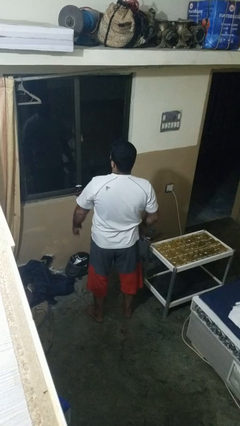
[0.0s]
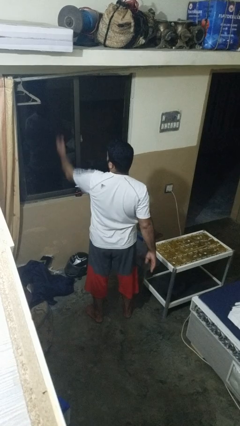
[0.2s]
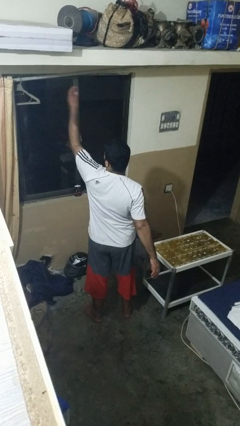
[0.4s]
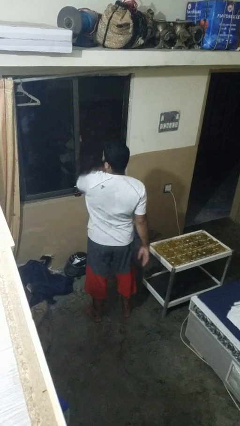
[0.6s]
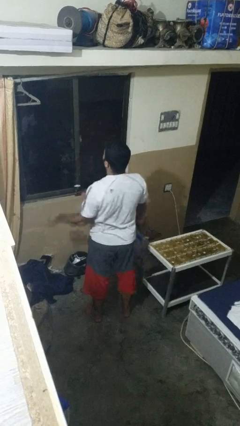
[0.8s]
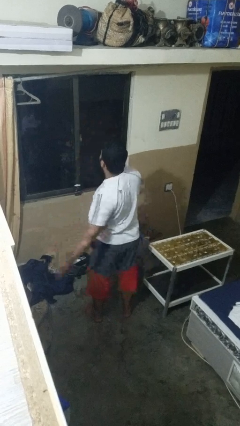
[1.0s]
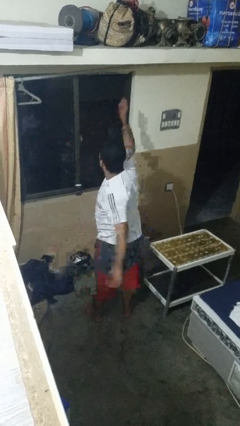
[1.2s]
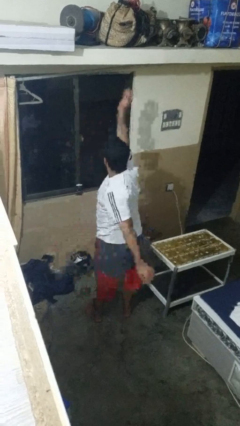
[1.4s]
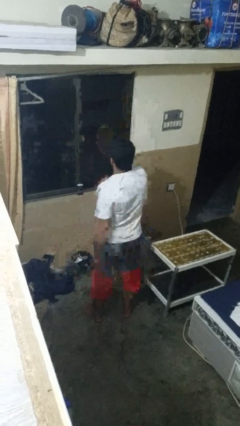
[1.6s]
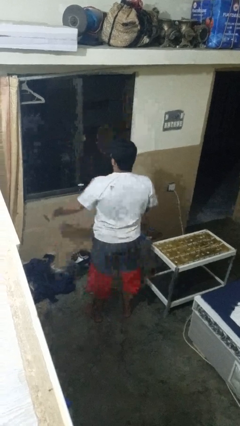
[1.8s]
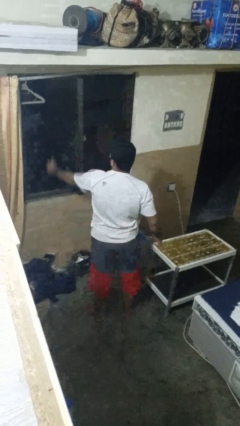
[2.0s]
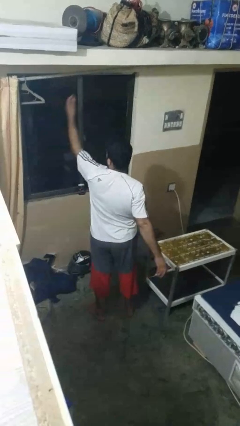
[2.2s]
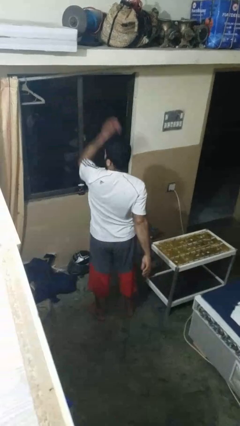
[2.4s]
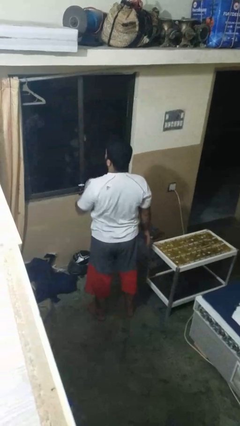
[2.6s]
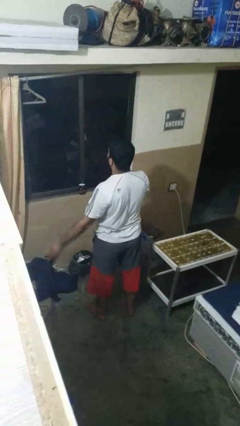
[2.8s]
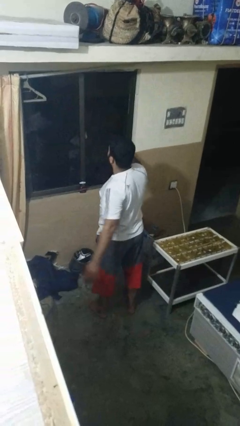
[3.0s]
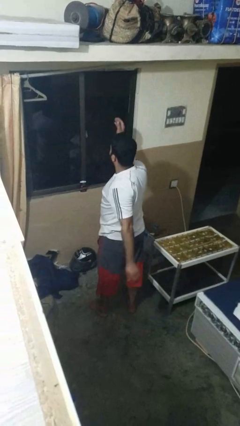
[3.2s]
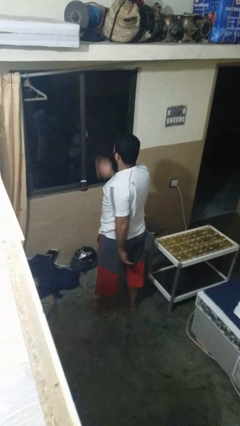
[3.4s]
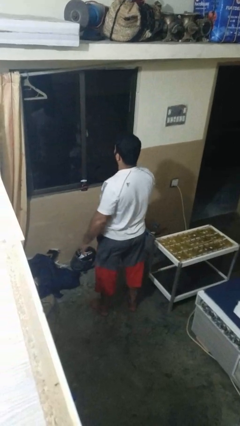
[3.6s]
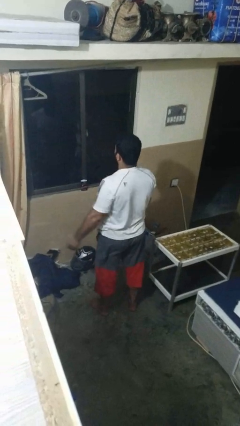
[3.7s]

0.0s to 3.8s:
person drums on chest

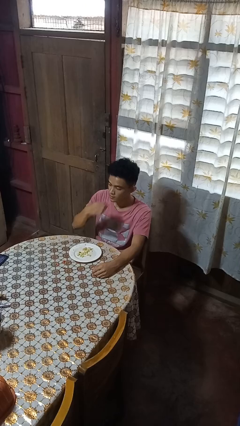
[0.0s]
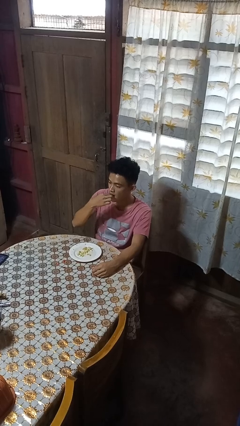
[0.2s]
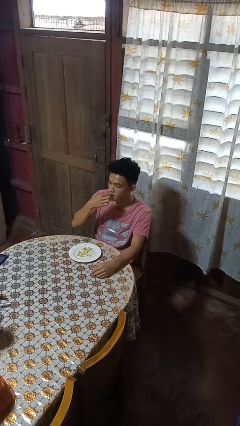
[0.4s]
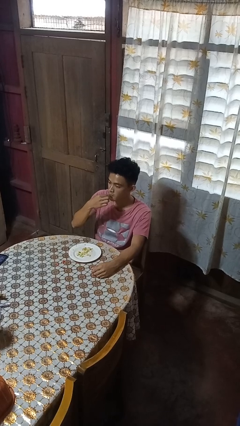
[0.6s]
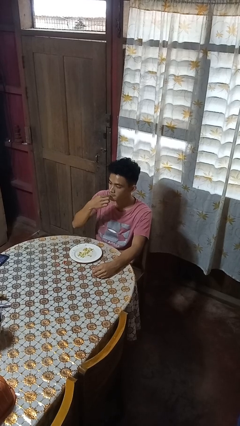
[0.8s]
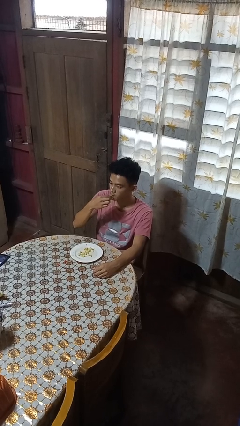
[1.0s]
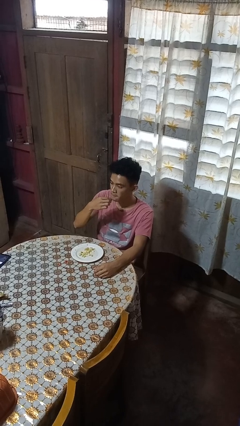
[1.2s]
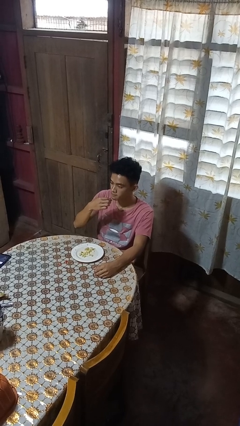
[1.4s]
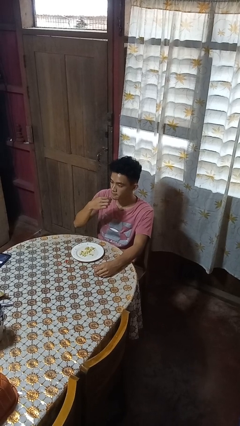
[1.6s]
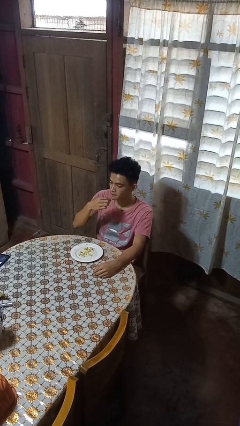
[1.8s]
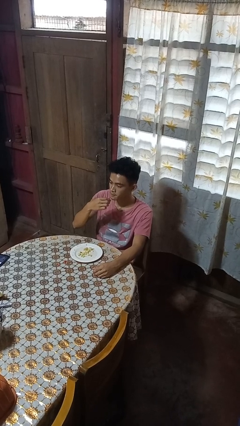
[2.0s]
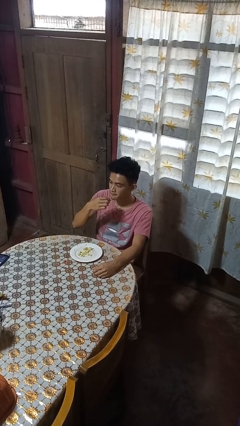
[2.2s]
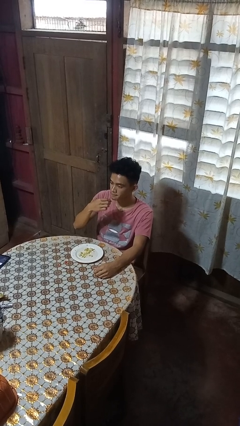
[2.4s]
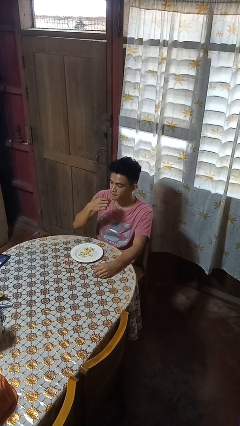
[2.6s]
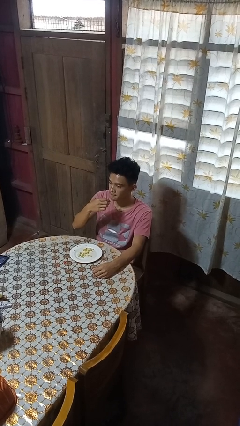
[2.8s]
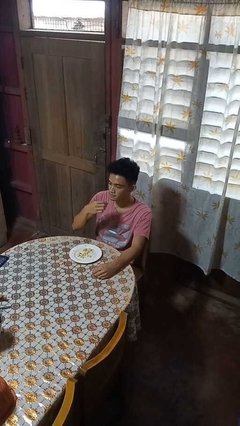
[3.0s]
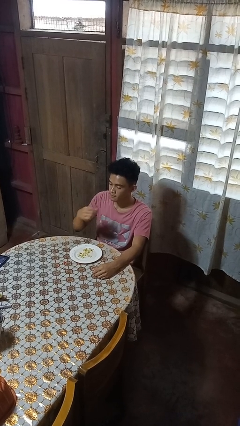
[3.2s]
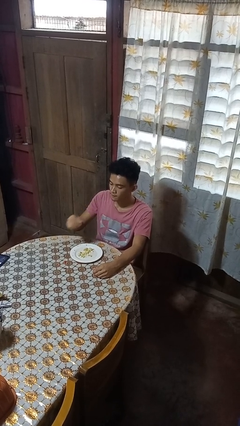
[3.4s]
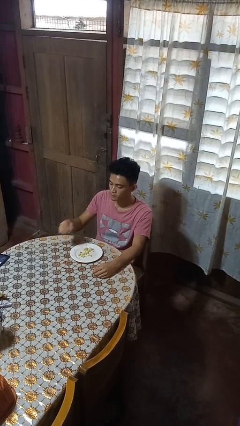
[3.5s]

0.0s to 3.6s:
person eats with hands

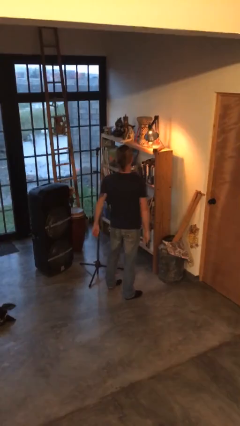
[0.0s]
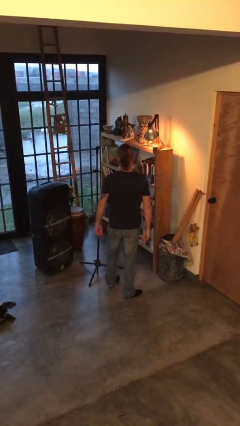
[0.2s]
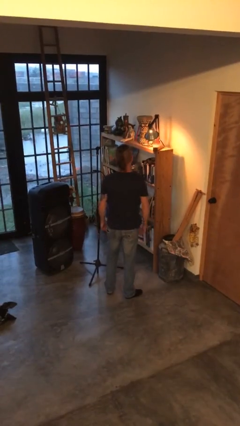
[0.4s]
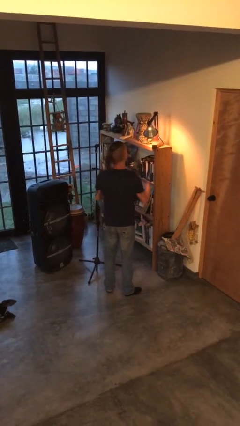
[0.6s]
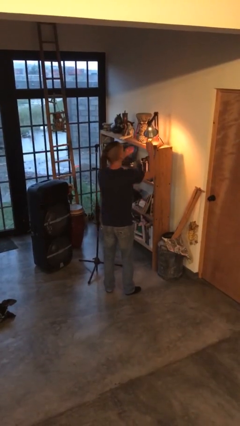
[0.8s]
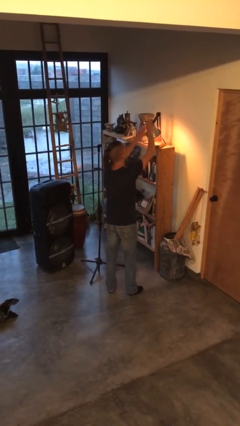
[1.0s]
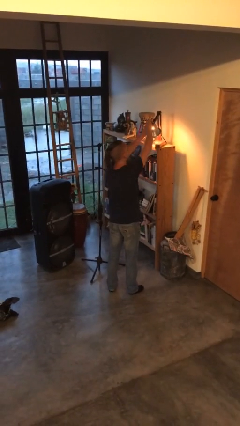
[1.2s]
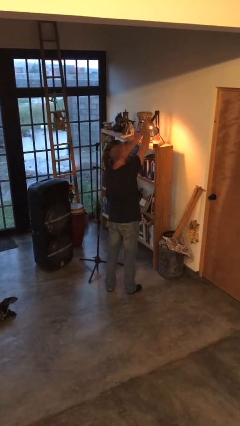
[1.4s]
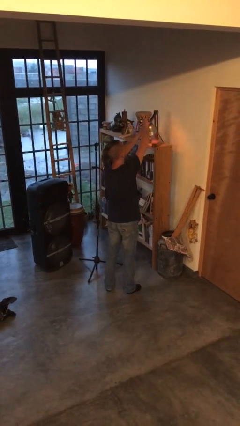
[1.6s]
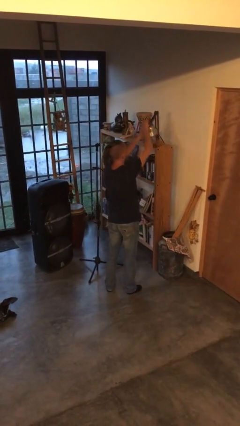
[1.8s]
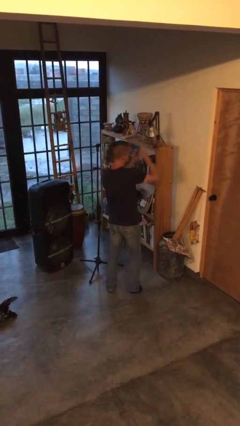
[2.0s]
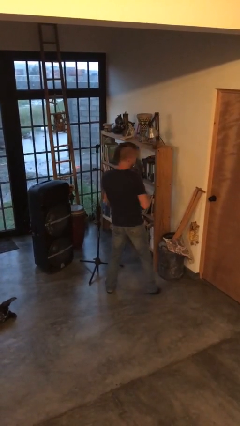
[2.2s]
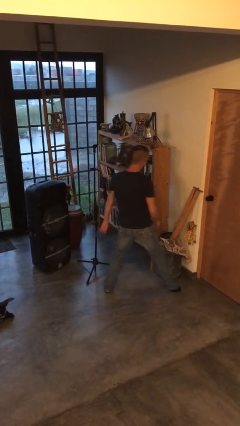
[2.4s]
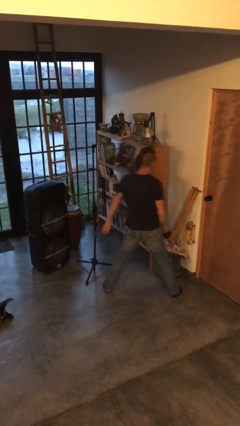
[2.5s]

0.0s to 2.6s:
person turns off lamp

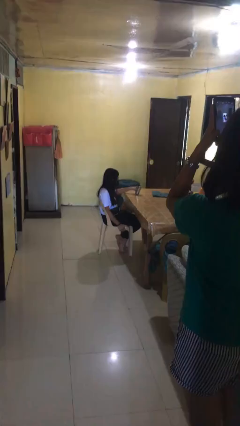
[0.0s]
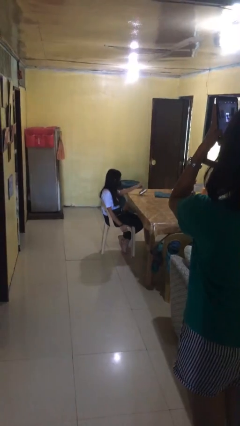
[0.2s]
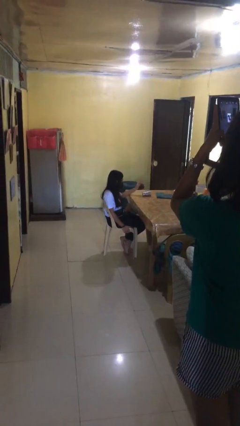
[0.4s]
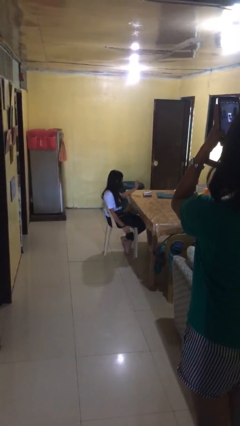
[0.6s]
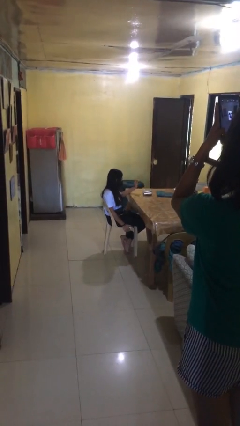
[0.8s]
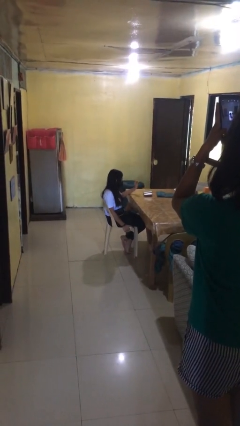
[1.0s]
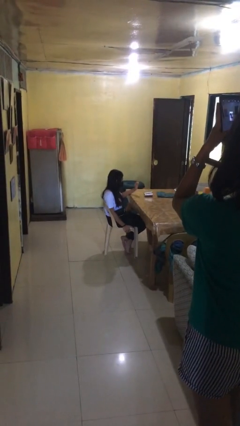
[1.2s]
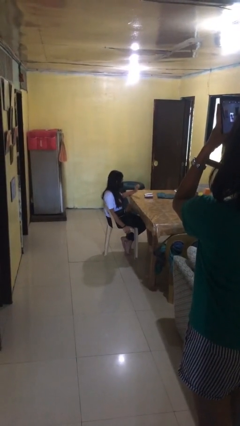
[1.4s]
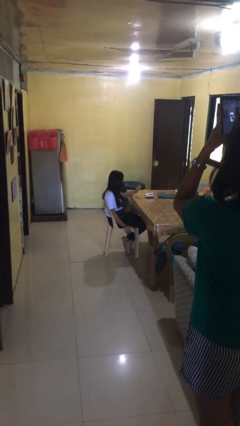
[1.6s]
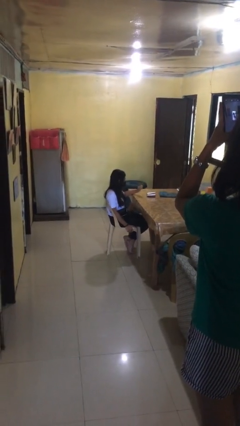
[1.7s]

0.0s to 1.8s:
person spills on table

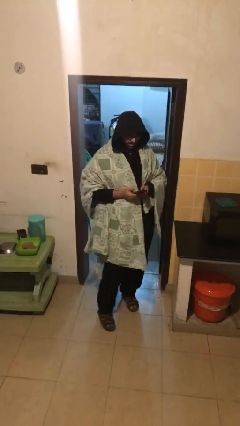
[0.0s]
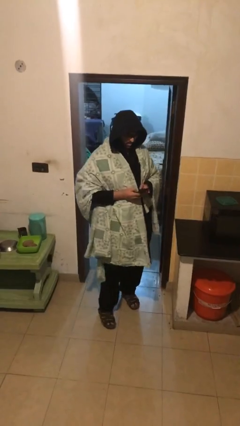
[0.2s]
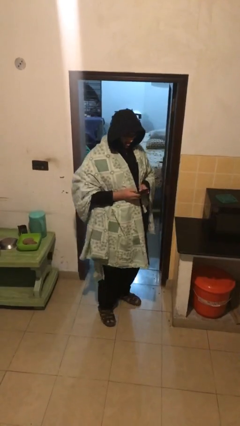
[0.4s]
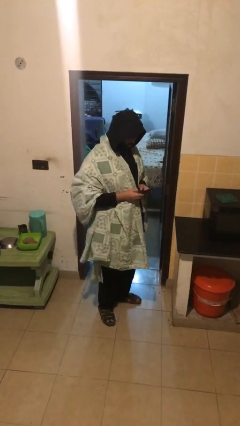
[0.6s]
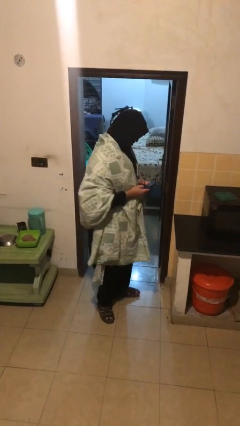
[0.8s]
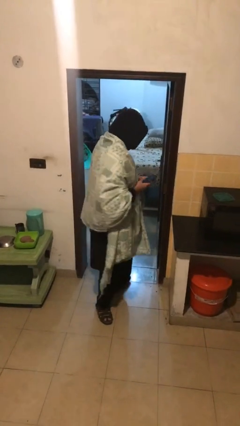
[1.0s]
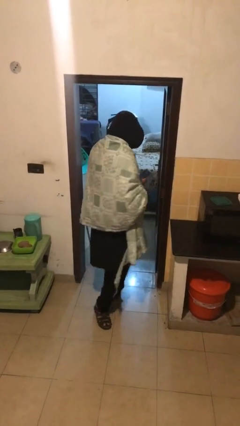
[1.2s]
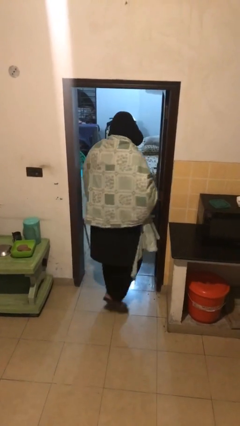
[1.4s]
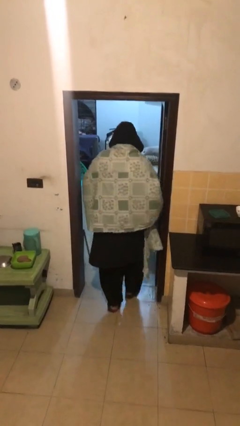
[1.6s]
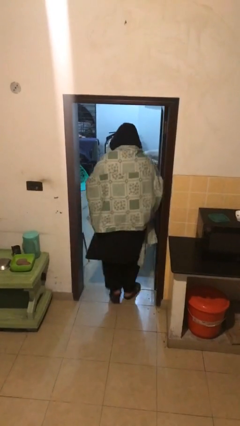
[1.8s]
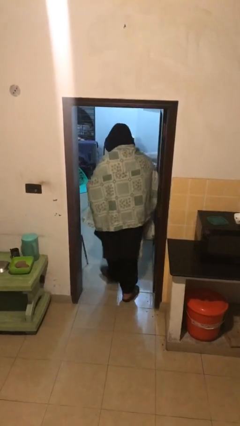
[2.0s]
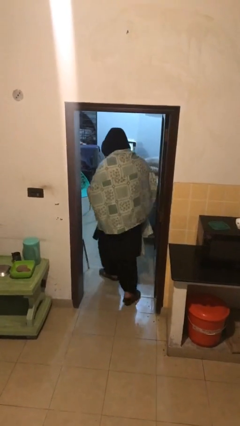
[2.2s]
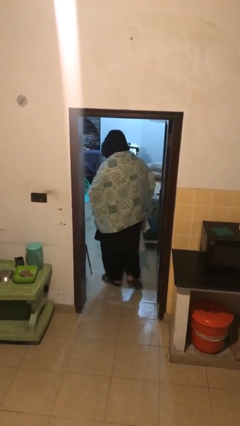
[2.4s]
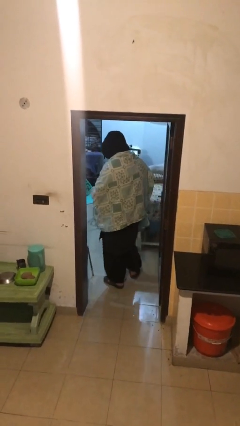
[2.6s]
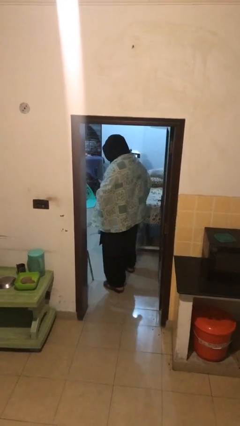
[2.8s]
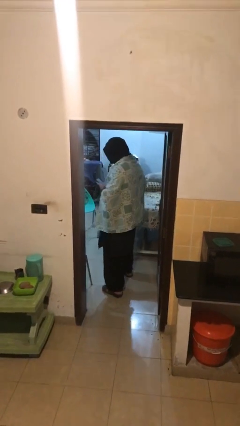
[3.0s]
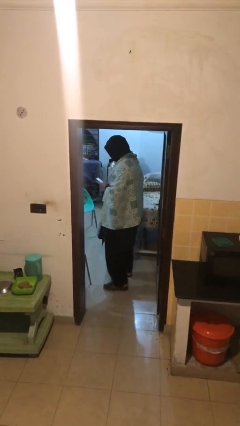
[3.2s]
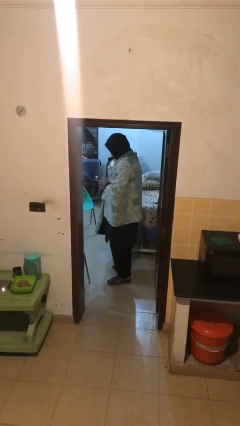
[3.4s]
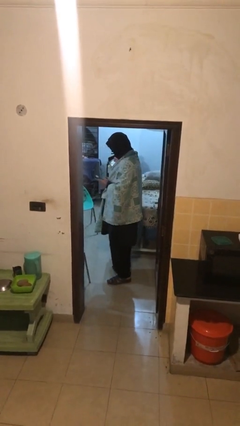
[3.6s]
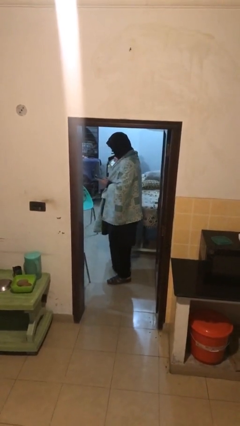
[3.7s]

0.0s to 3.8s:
person exits scene through structure

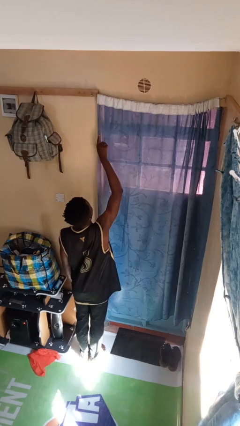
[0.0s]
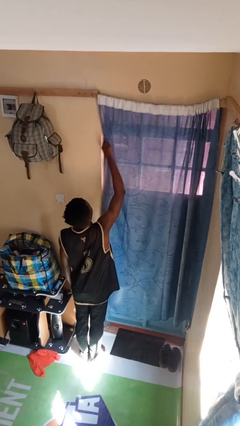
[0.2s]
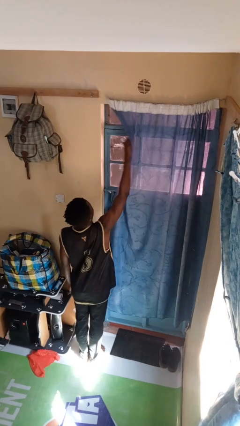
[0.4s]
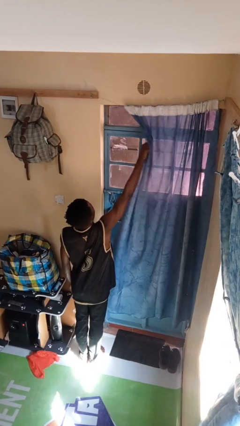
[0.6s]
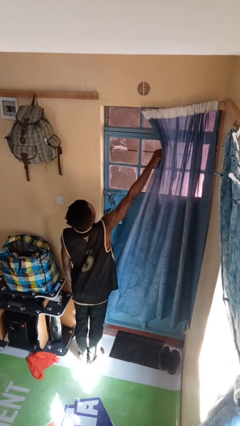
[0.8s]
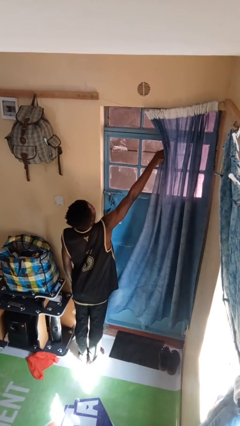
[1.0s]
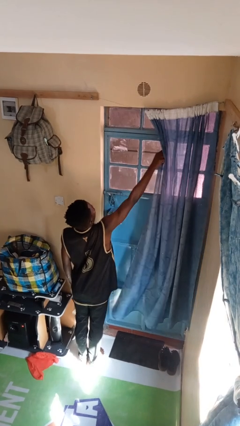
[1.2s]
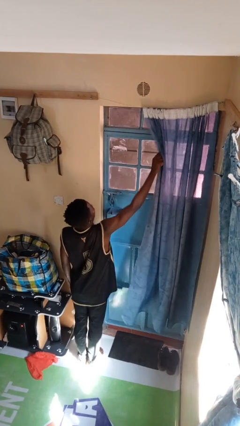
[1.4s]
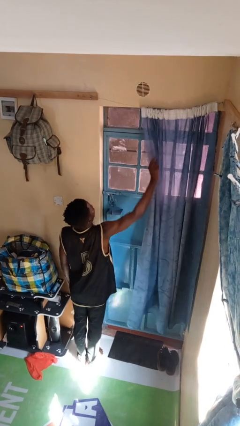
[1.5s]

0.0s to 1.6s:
person opens curtains
